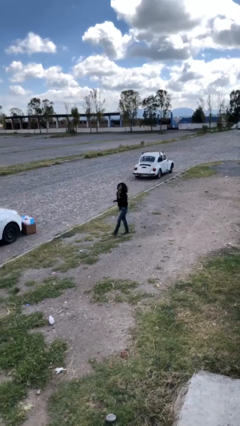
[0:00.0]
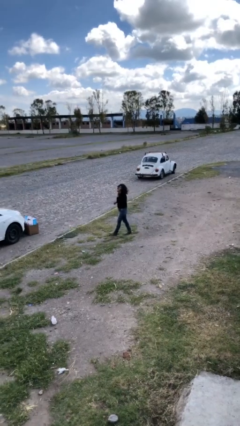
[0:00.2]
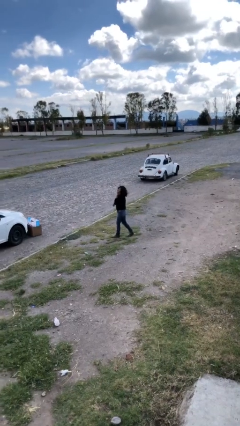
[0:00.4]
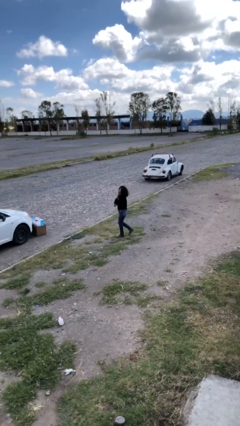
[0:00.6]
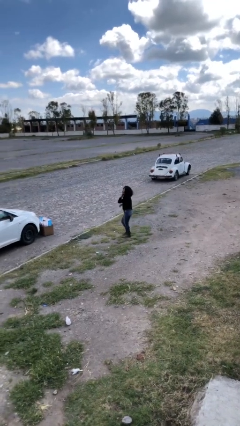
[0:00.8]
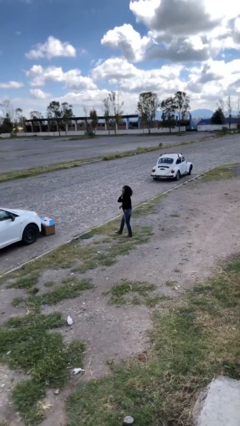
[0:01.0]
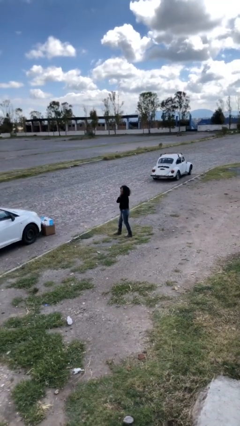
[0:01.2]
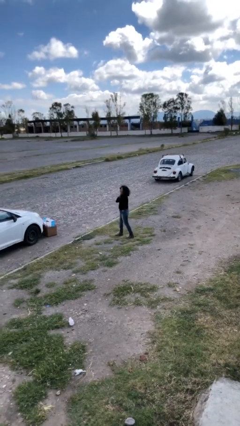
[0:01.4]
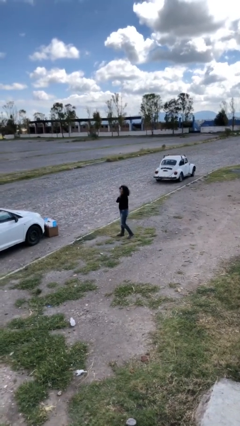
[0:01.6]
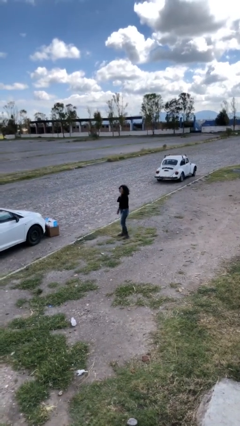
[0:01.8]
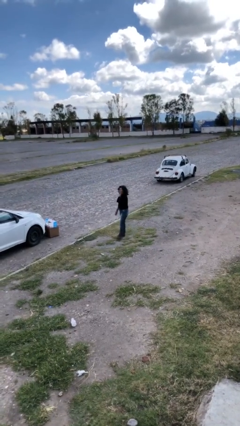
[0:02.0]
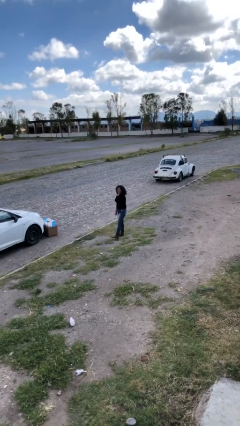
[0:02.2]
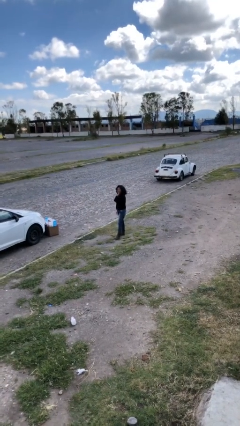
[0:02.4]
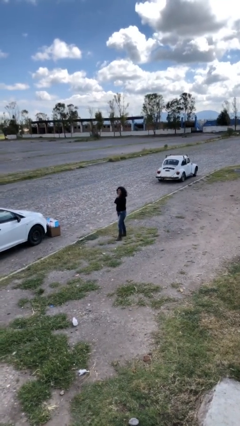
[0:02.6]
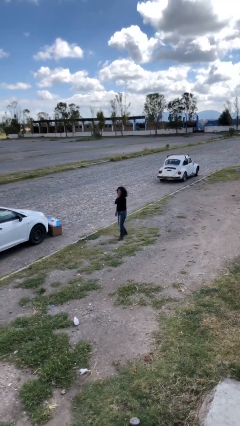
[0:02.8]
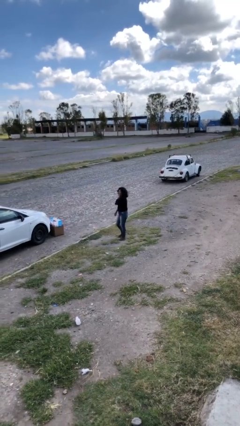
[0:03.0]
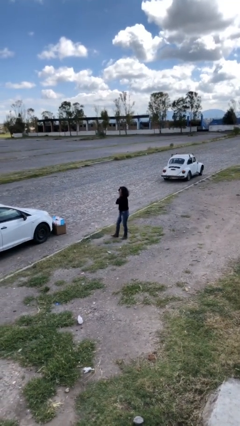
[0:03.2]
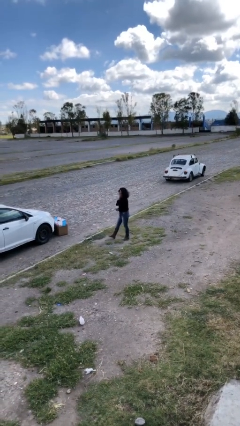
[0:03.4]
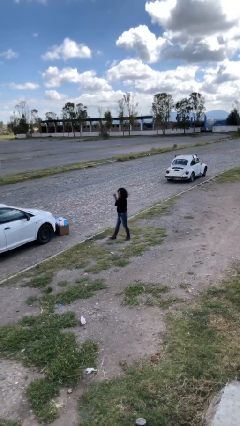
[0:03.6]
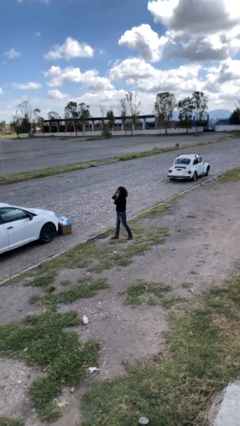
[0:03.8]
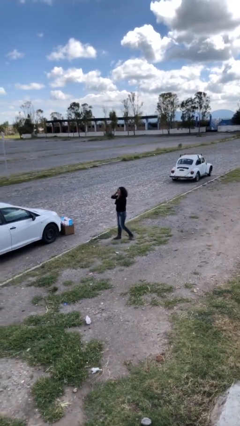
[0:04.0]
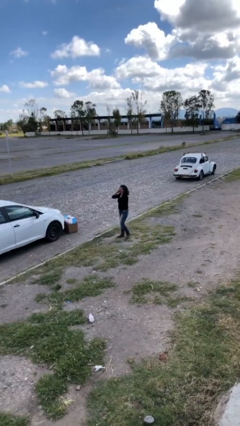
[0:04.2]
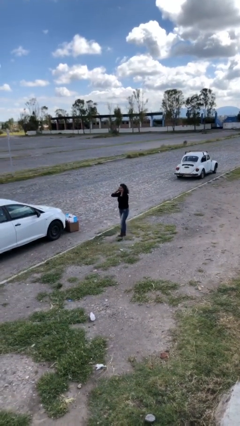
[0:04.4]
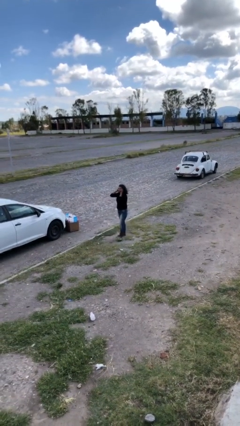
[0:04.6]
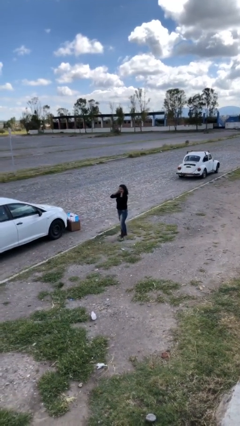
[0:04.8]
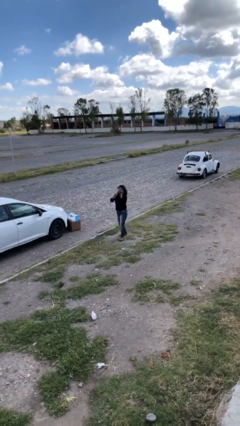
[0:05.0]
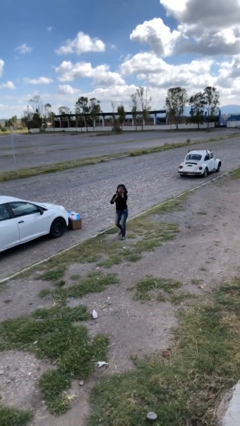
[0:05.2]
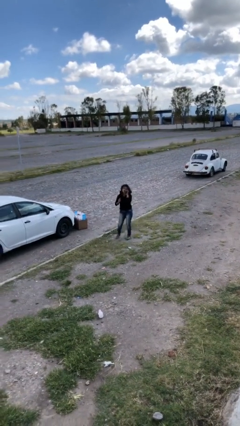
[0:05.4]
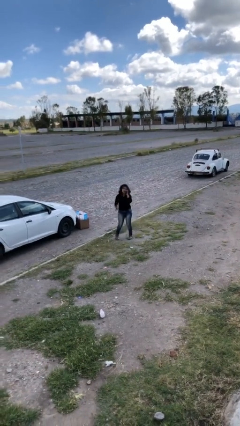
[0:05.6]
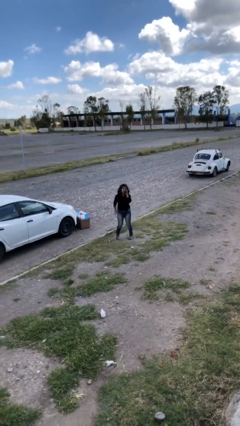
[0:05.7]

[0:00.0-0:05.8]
person talks on phone

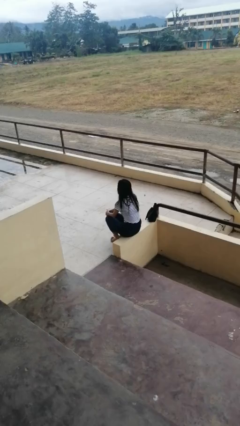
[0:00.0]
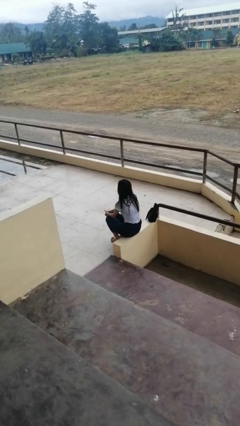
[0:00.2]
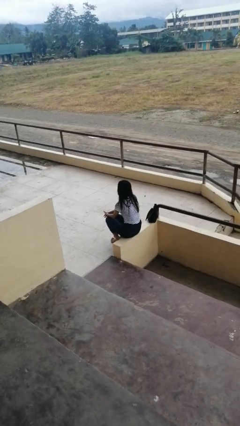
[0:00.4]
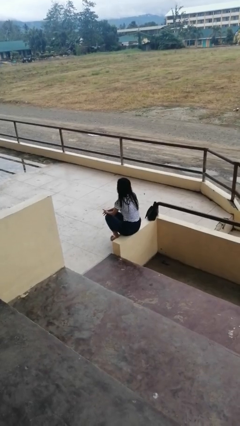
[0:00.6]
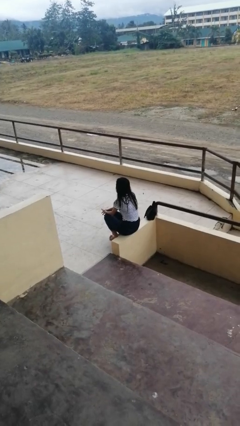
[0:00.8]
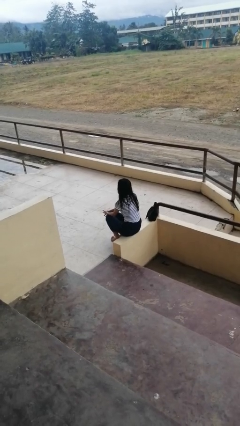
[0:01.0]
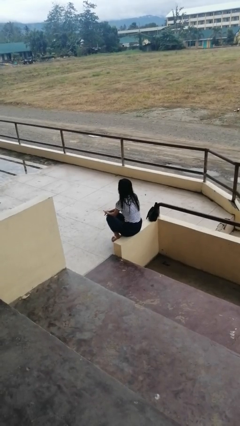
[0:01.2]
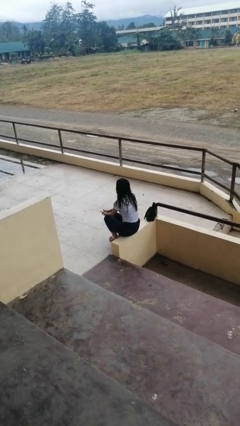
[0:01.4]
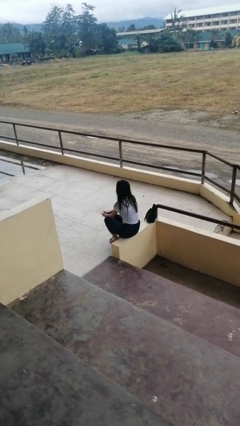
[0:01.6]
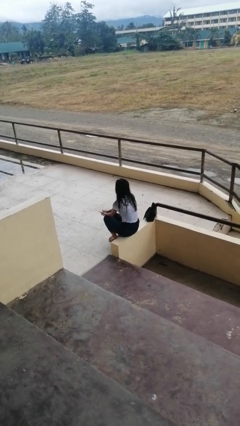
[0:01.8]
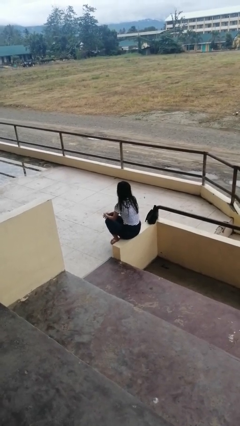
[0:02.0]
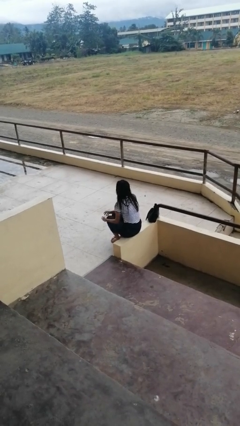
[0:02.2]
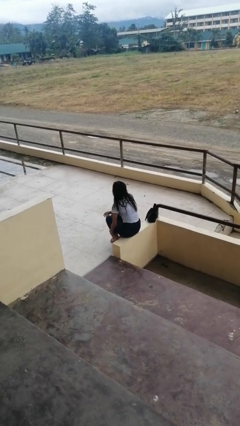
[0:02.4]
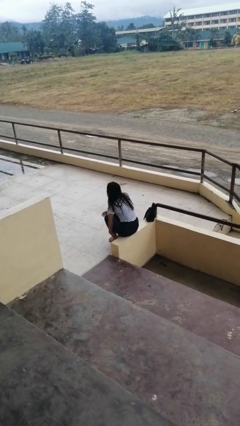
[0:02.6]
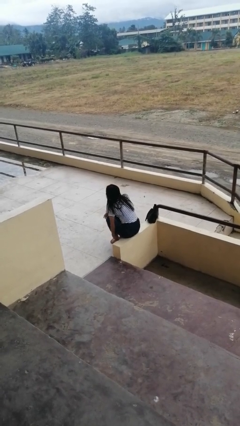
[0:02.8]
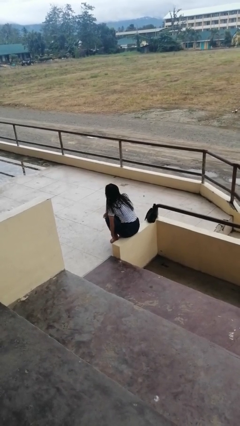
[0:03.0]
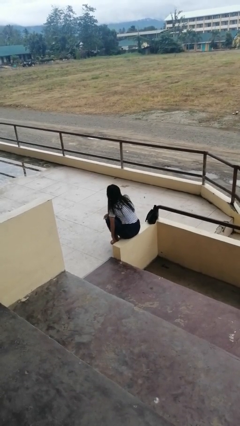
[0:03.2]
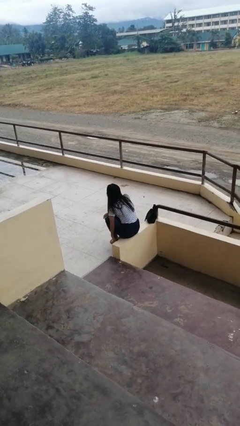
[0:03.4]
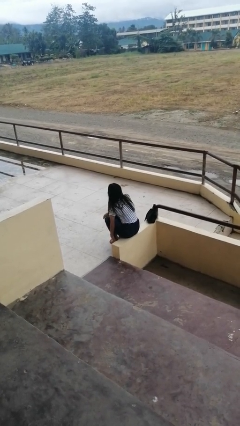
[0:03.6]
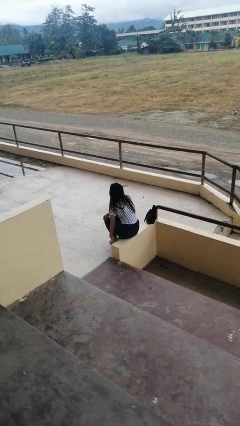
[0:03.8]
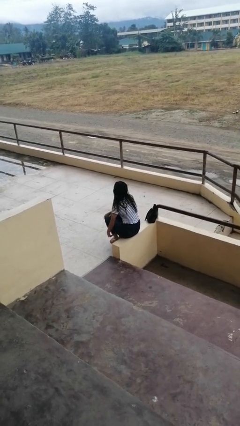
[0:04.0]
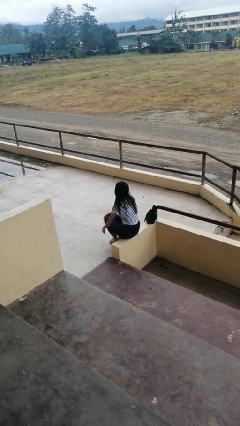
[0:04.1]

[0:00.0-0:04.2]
person rubs foot

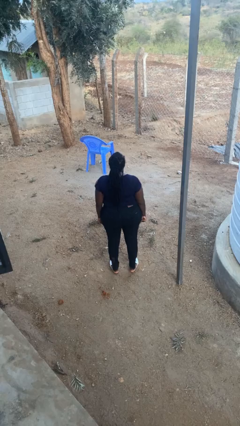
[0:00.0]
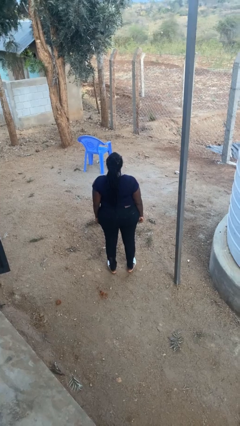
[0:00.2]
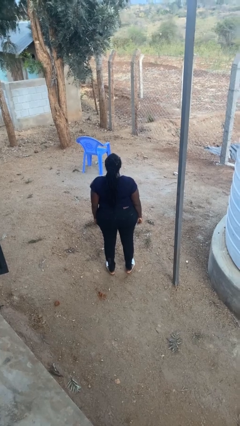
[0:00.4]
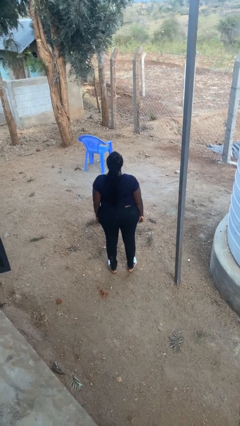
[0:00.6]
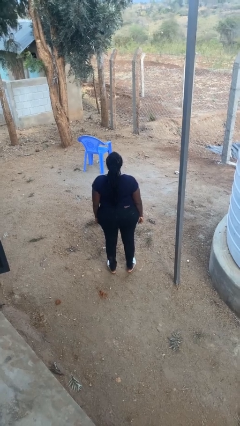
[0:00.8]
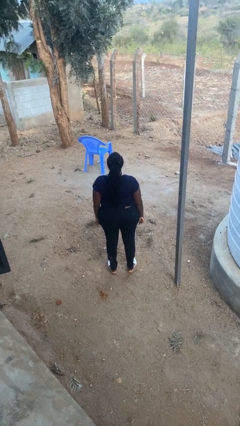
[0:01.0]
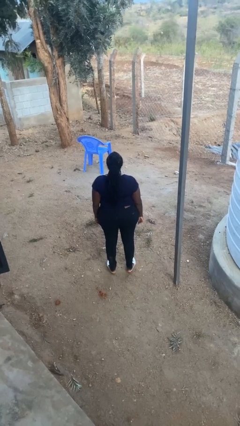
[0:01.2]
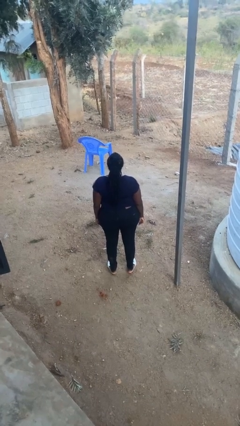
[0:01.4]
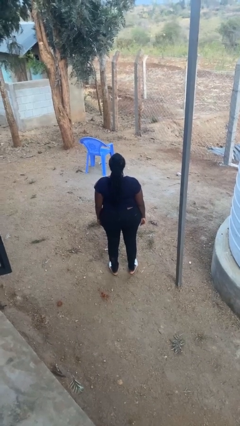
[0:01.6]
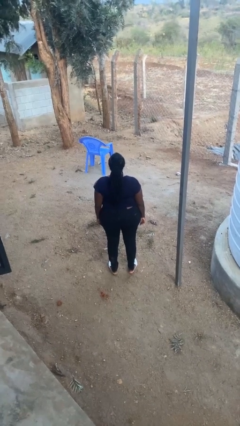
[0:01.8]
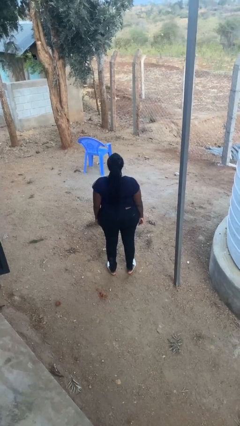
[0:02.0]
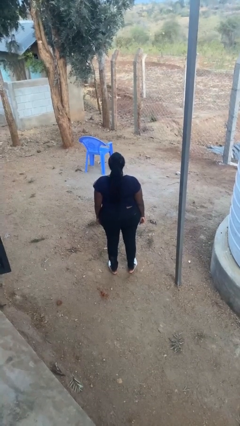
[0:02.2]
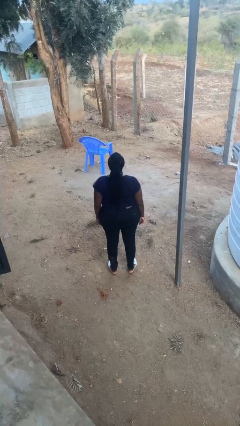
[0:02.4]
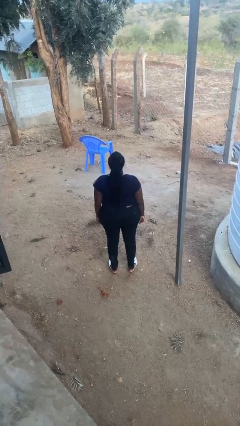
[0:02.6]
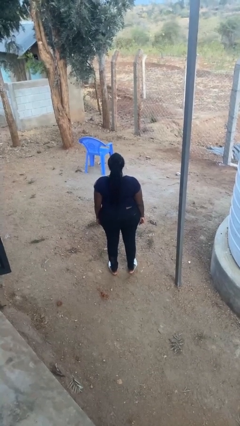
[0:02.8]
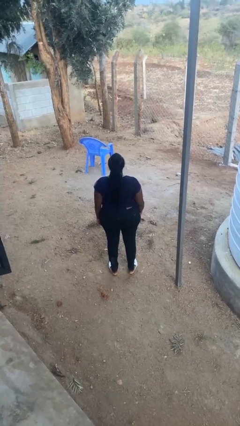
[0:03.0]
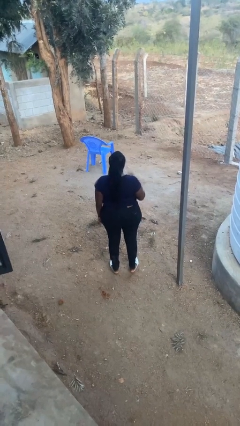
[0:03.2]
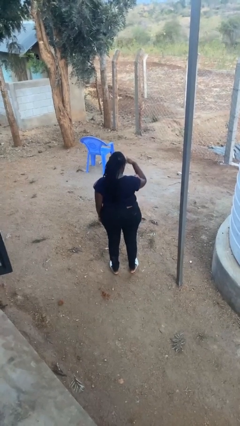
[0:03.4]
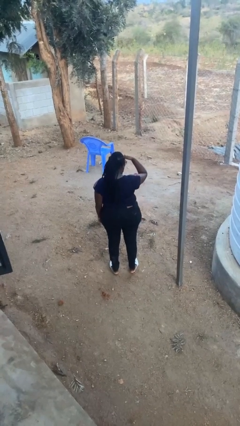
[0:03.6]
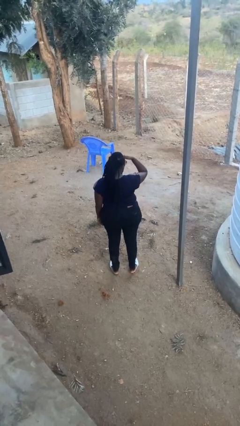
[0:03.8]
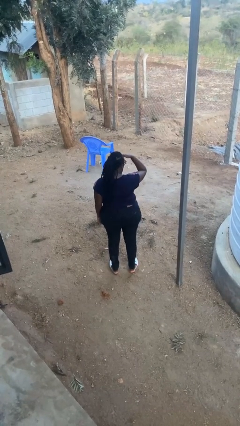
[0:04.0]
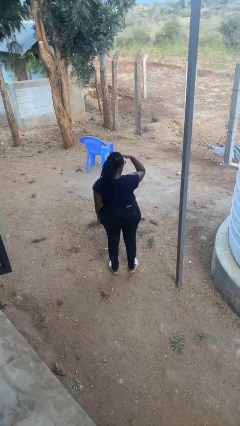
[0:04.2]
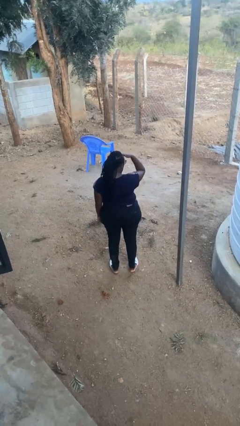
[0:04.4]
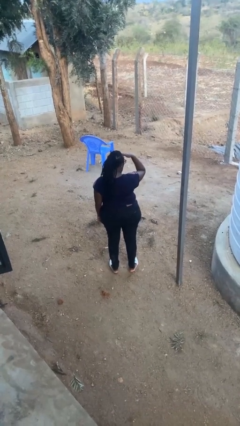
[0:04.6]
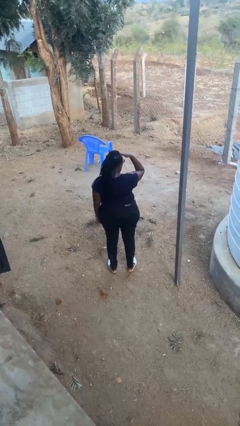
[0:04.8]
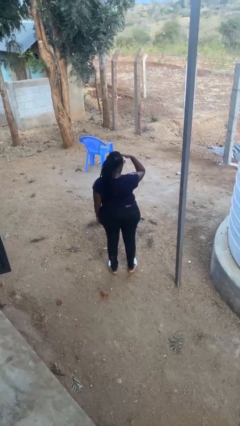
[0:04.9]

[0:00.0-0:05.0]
person shades eyes

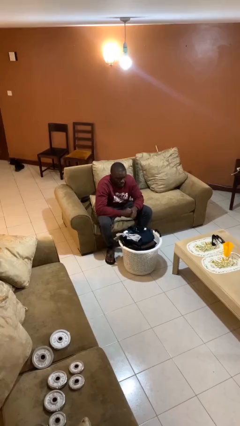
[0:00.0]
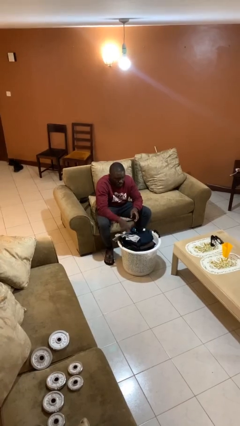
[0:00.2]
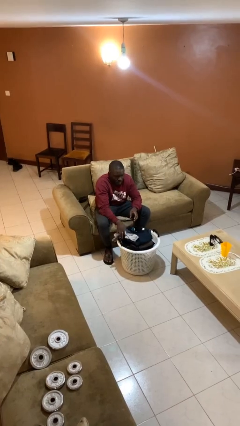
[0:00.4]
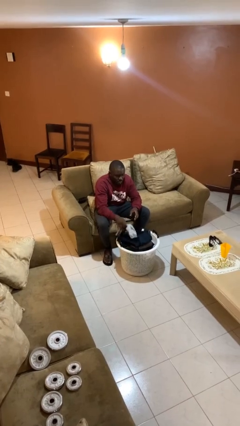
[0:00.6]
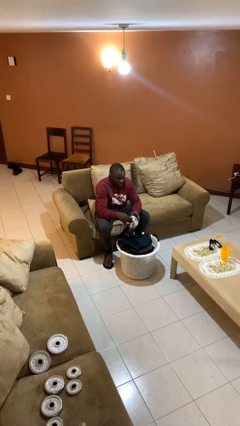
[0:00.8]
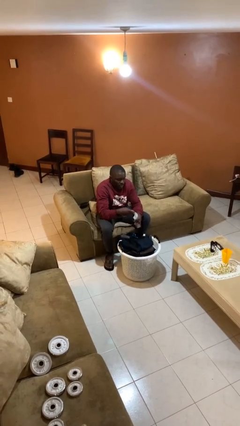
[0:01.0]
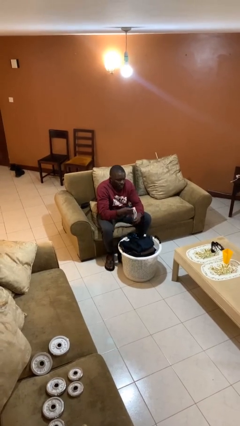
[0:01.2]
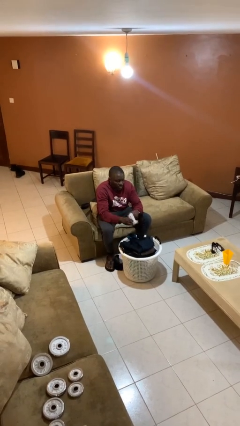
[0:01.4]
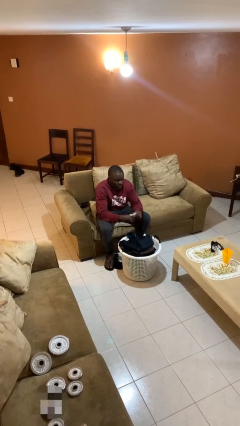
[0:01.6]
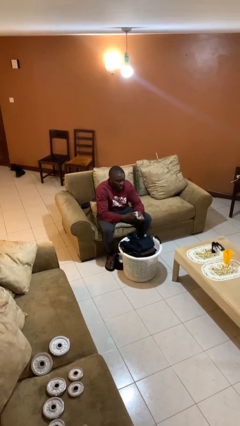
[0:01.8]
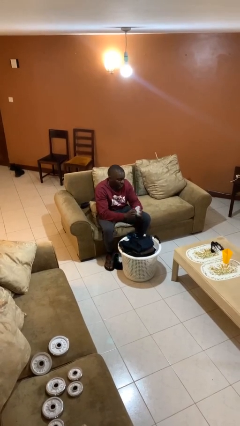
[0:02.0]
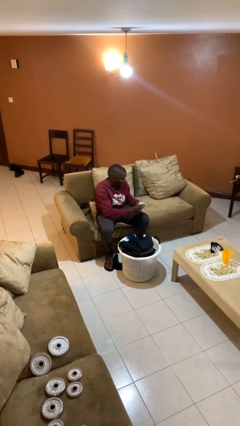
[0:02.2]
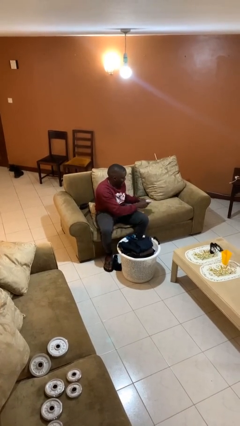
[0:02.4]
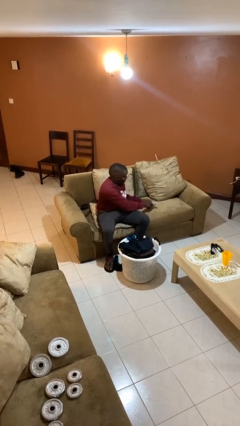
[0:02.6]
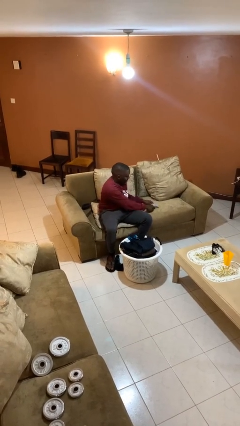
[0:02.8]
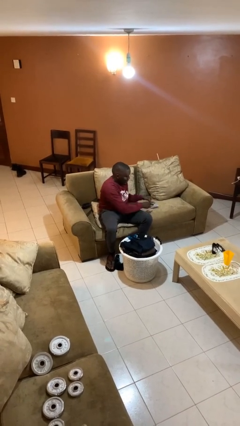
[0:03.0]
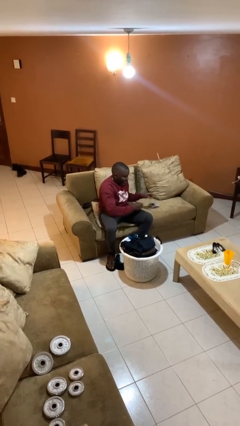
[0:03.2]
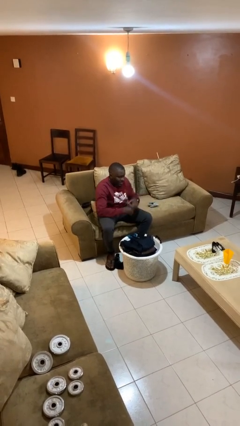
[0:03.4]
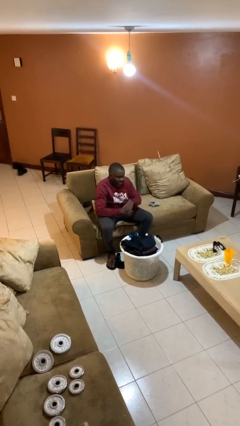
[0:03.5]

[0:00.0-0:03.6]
person folds socks
